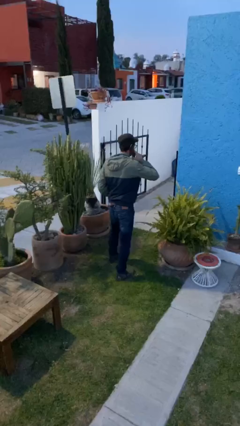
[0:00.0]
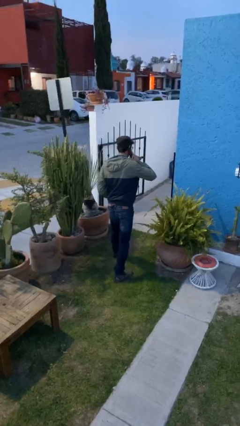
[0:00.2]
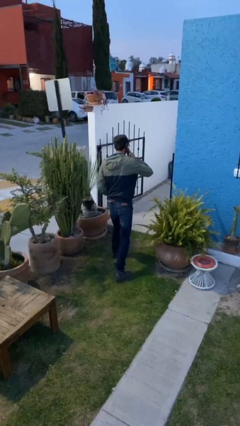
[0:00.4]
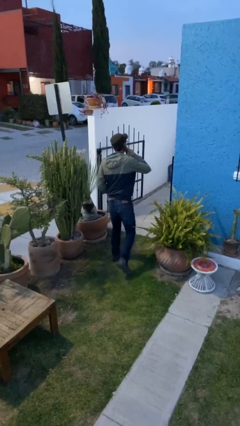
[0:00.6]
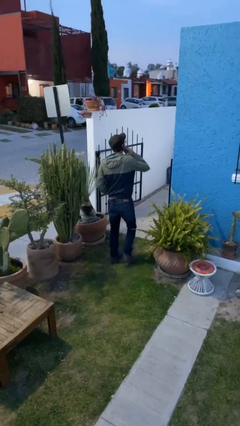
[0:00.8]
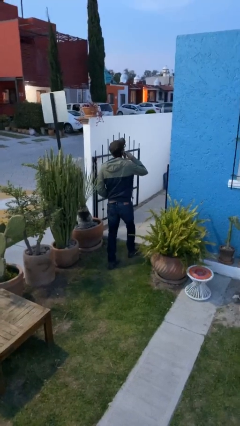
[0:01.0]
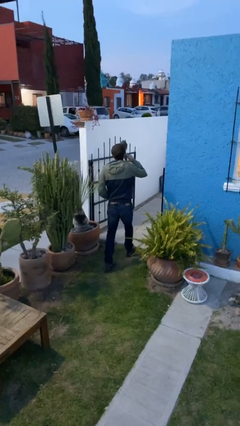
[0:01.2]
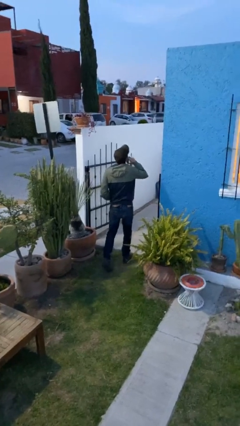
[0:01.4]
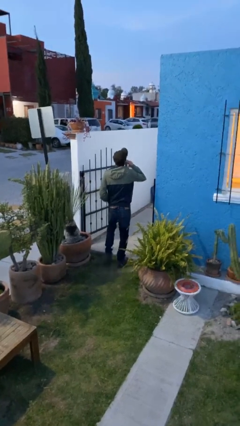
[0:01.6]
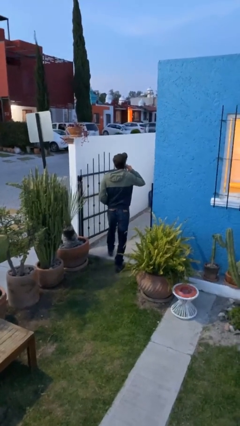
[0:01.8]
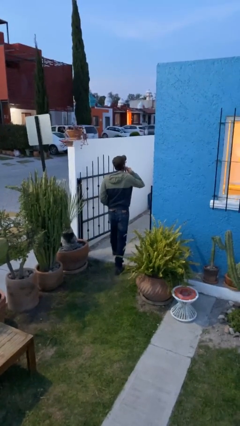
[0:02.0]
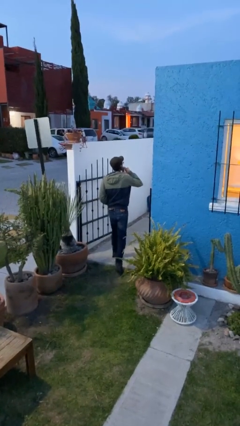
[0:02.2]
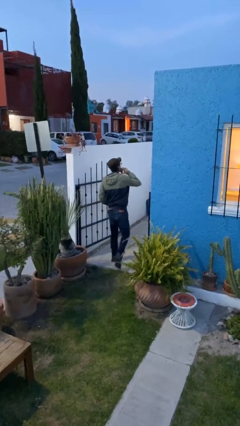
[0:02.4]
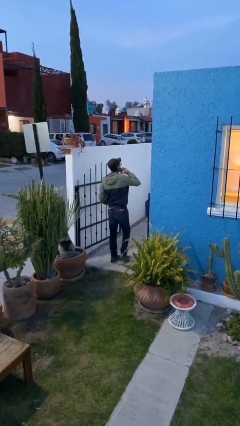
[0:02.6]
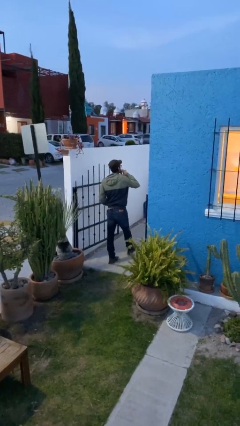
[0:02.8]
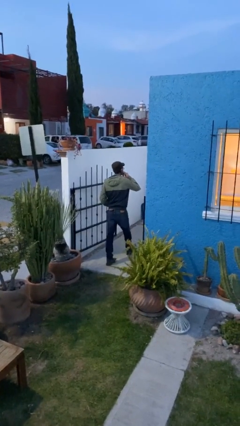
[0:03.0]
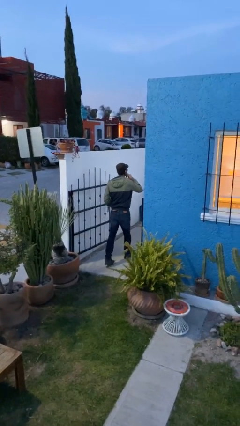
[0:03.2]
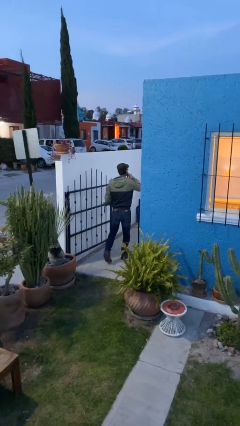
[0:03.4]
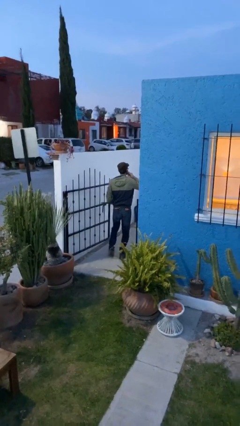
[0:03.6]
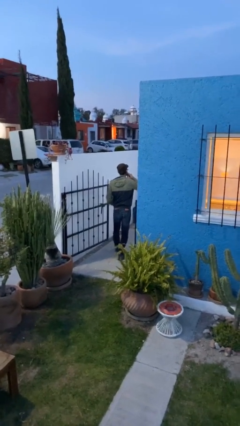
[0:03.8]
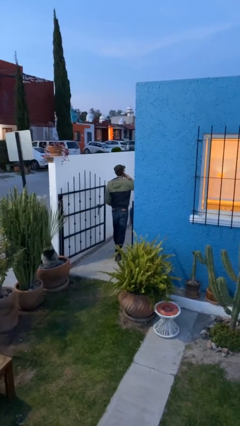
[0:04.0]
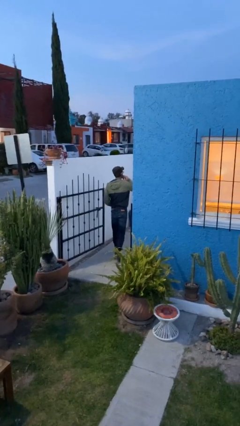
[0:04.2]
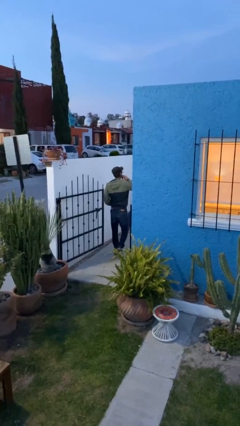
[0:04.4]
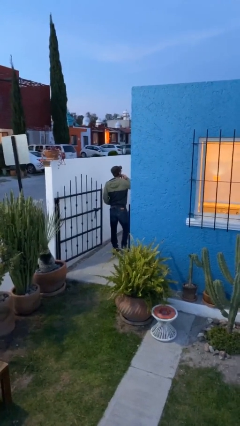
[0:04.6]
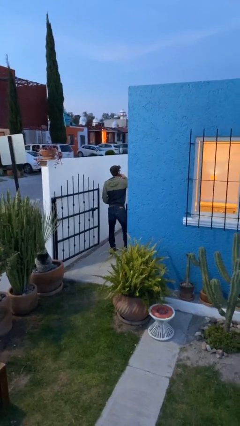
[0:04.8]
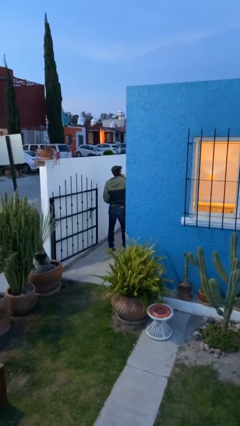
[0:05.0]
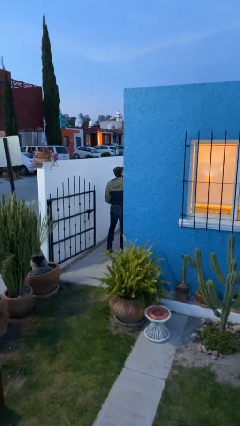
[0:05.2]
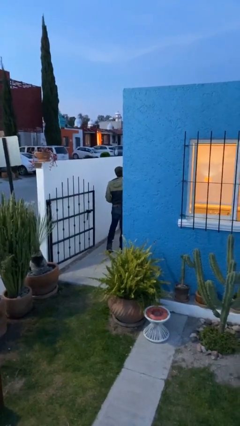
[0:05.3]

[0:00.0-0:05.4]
person exits scene through structure

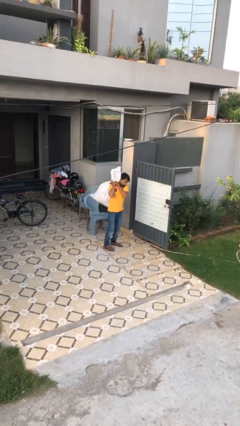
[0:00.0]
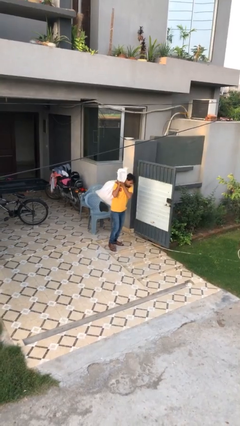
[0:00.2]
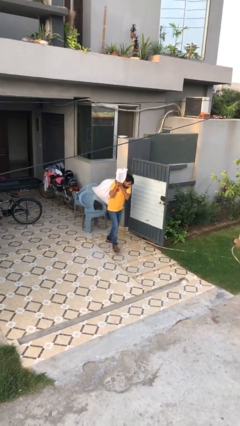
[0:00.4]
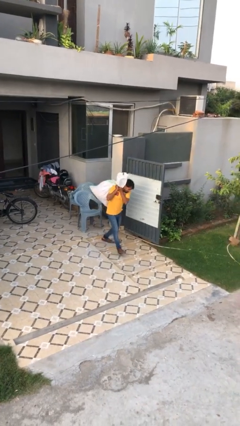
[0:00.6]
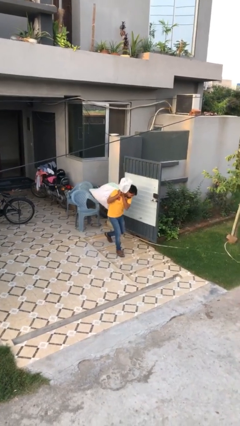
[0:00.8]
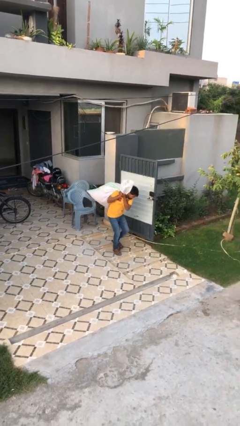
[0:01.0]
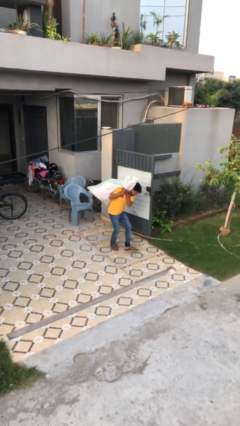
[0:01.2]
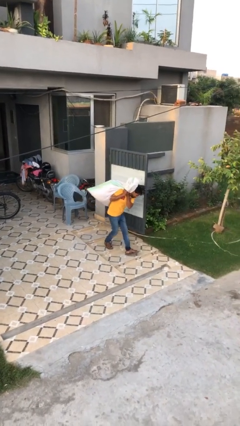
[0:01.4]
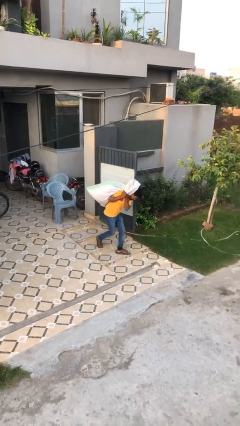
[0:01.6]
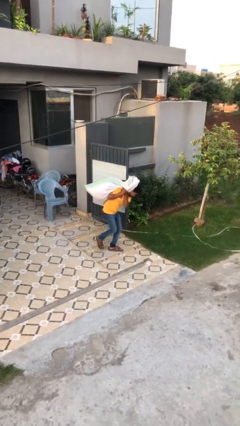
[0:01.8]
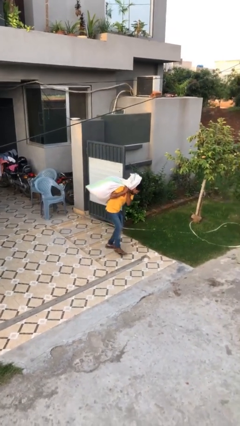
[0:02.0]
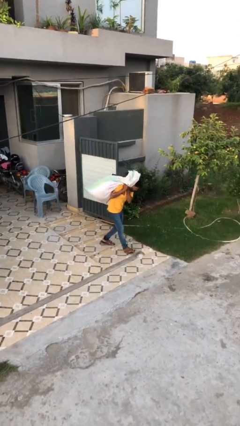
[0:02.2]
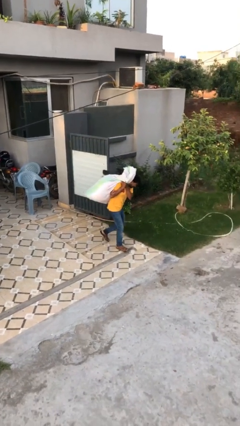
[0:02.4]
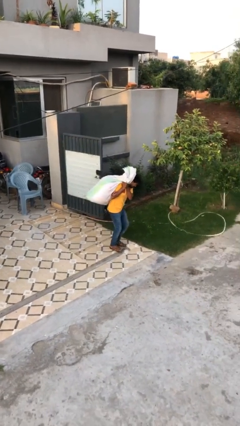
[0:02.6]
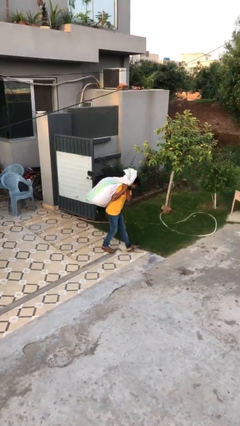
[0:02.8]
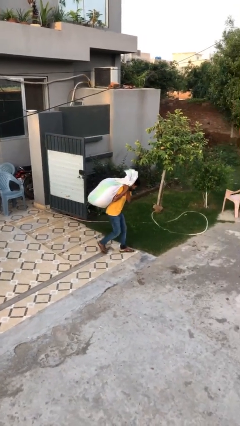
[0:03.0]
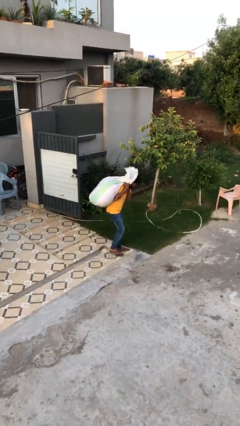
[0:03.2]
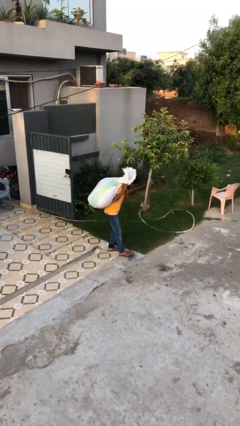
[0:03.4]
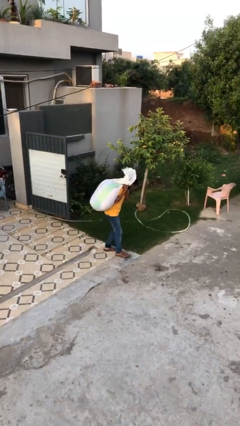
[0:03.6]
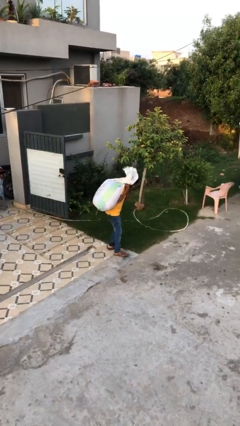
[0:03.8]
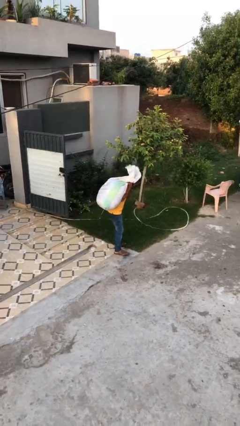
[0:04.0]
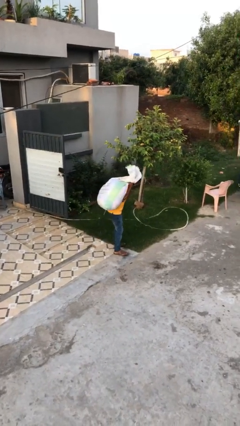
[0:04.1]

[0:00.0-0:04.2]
person carries heavy object

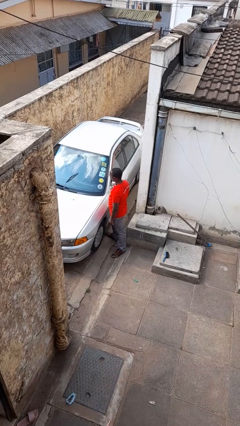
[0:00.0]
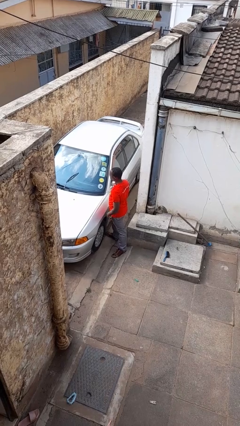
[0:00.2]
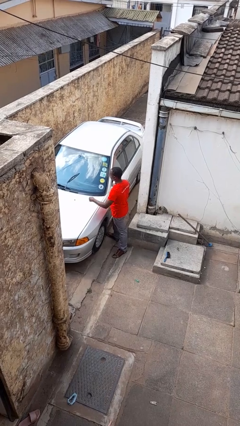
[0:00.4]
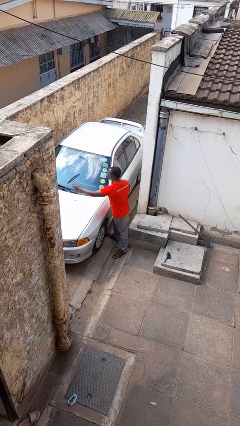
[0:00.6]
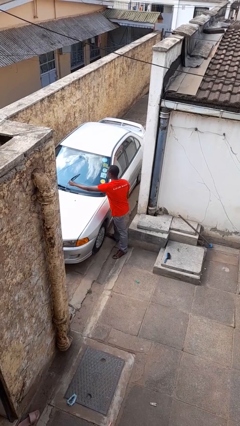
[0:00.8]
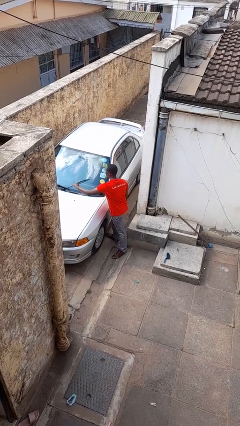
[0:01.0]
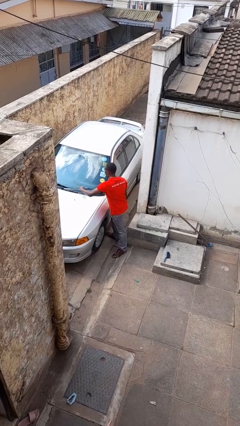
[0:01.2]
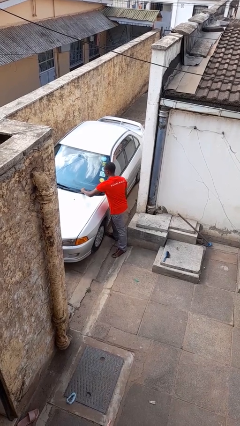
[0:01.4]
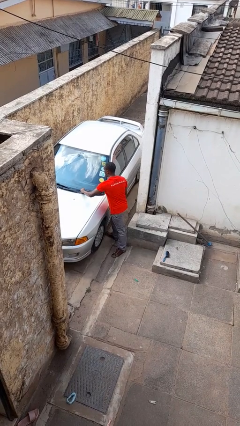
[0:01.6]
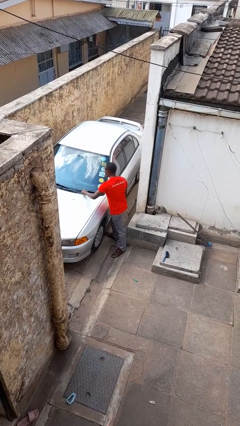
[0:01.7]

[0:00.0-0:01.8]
person flips down car wipers

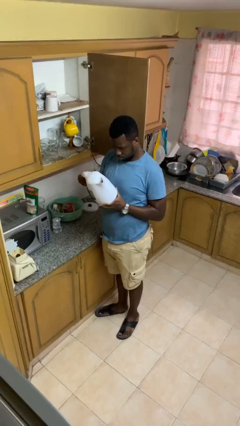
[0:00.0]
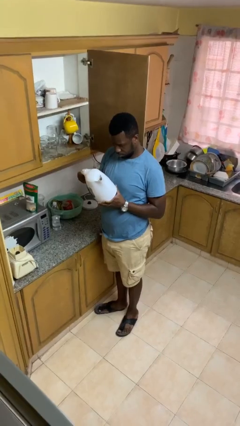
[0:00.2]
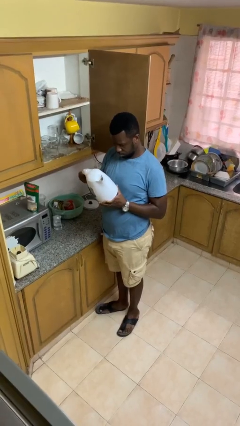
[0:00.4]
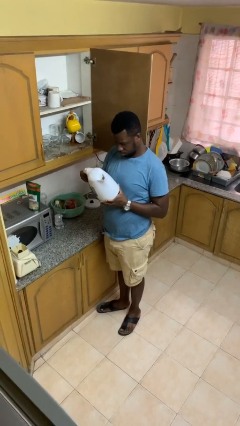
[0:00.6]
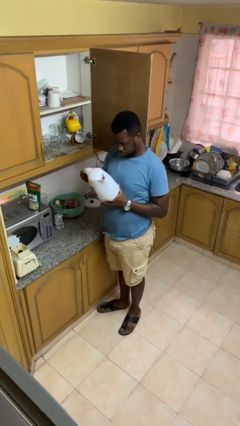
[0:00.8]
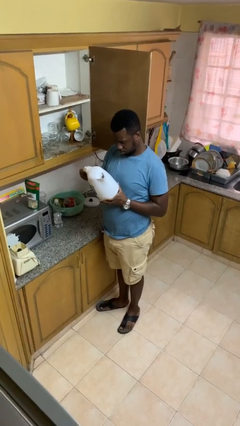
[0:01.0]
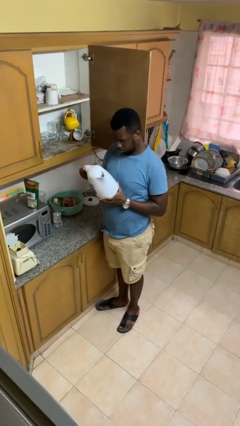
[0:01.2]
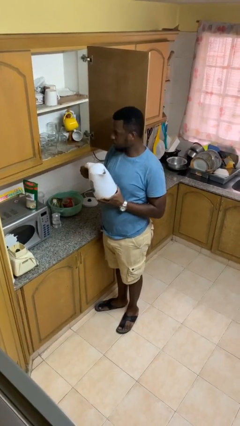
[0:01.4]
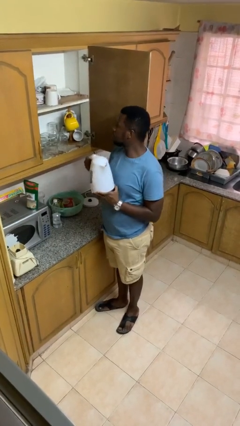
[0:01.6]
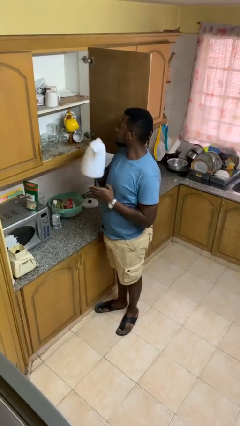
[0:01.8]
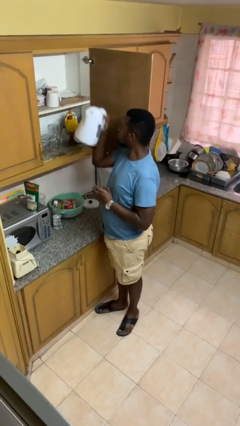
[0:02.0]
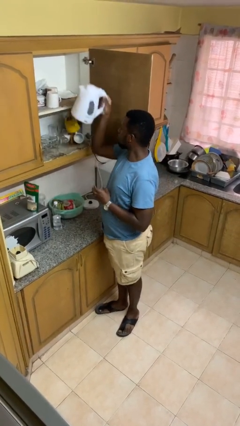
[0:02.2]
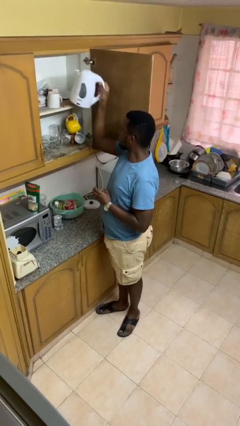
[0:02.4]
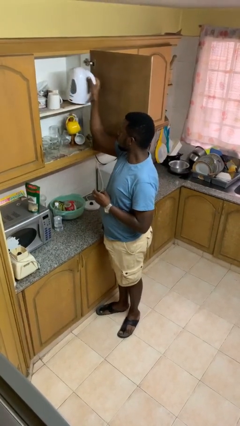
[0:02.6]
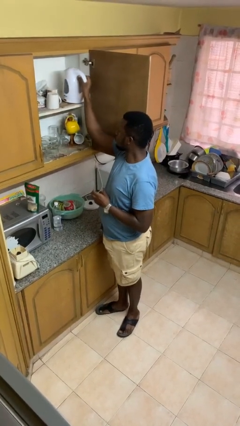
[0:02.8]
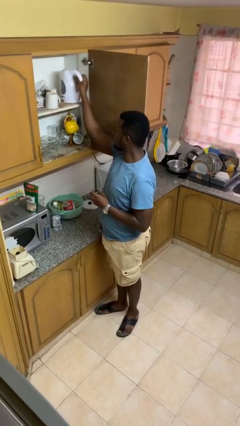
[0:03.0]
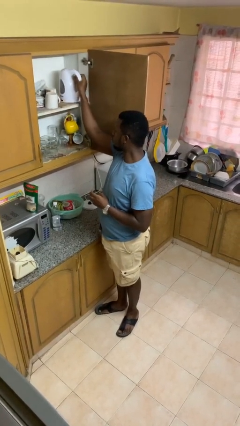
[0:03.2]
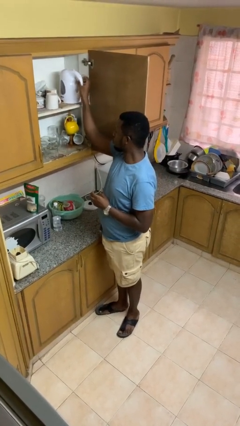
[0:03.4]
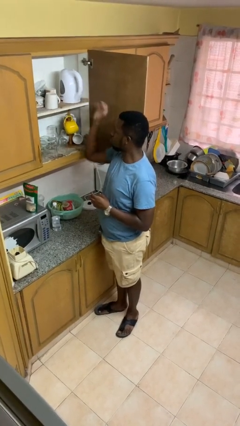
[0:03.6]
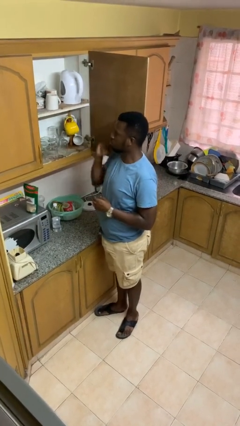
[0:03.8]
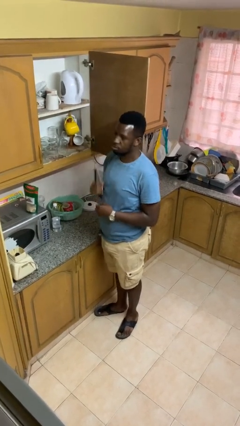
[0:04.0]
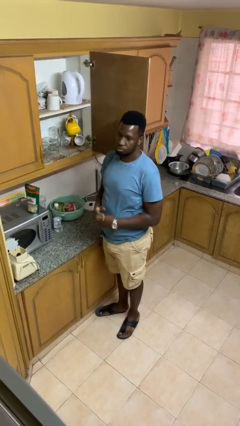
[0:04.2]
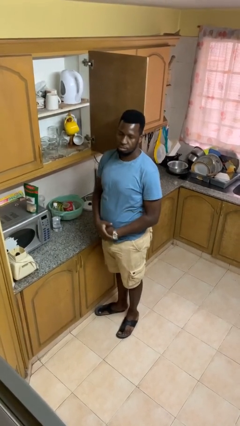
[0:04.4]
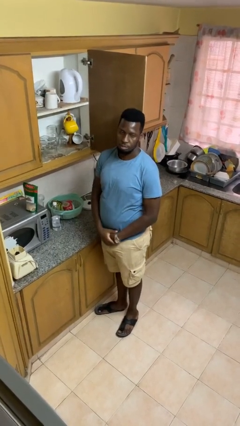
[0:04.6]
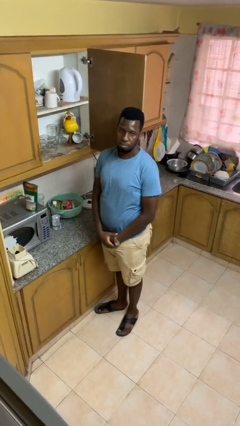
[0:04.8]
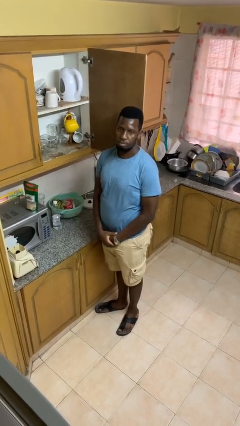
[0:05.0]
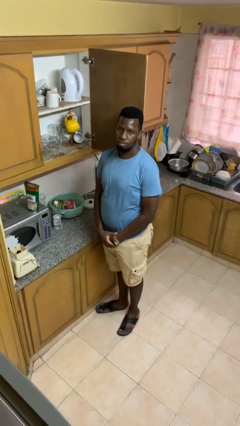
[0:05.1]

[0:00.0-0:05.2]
person puts down object on shelf

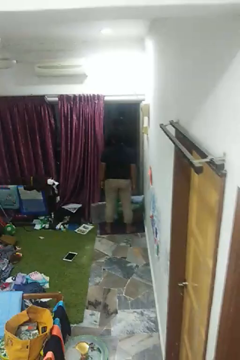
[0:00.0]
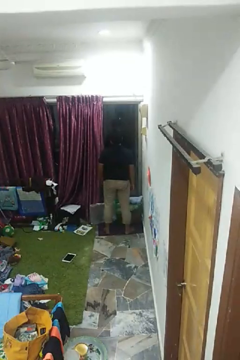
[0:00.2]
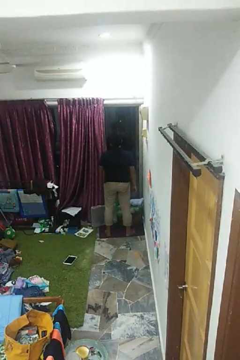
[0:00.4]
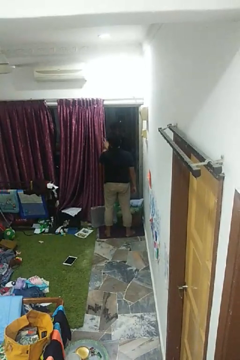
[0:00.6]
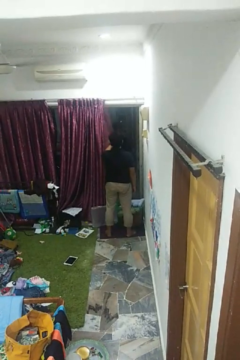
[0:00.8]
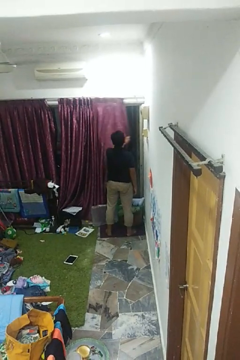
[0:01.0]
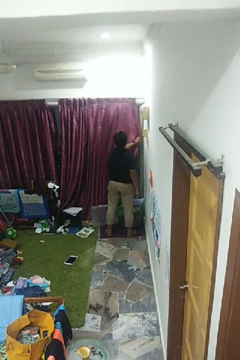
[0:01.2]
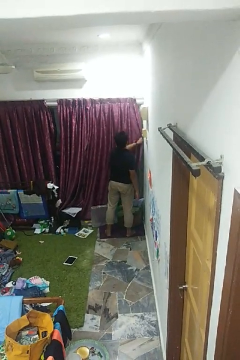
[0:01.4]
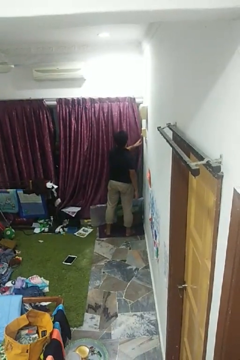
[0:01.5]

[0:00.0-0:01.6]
person closes curtains
